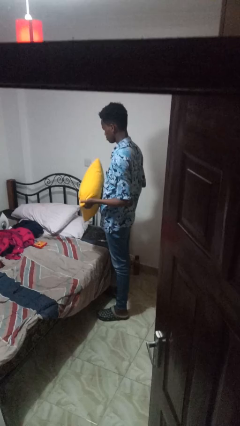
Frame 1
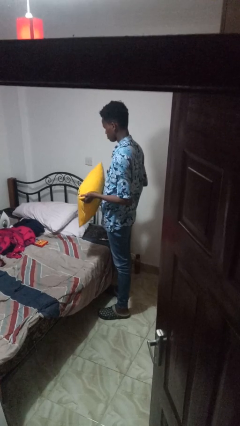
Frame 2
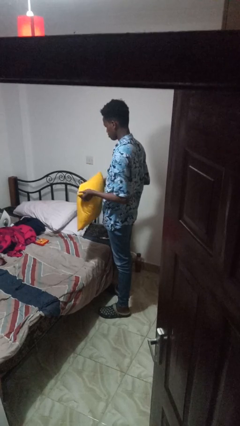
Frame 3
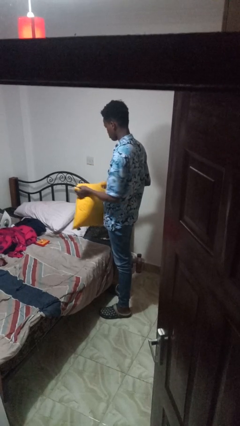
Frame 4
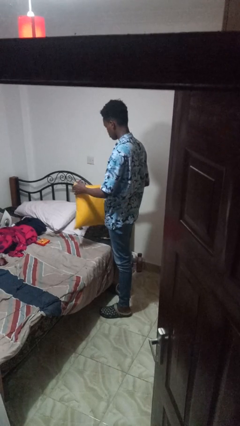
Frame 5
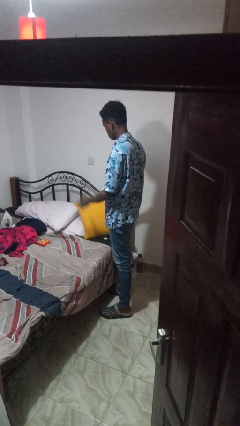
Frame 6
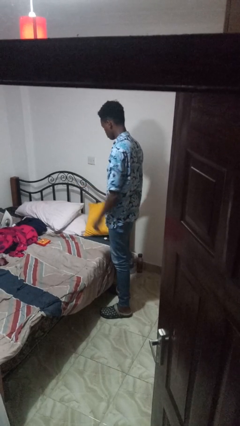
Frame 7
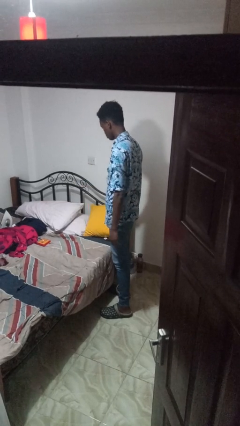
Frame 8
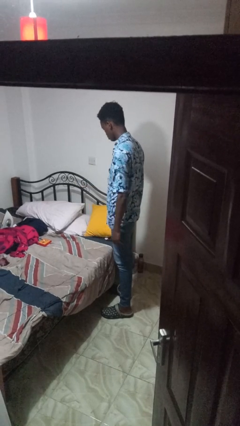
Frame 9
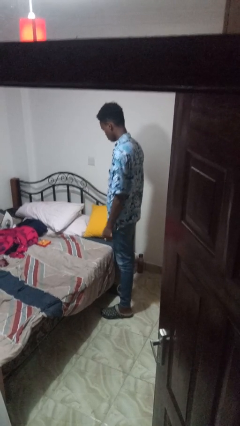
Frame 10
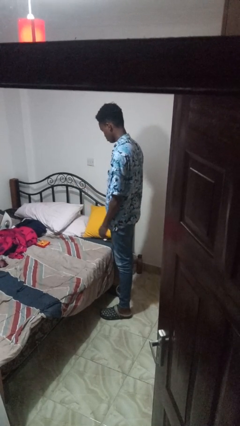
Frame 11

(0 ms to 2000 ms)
person puts down object on bed

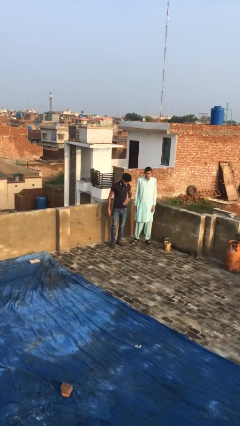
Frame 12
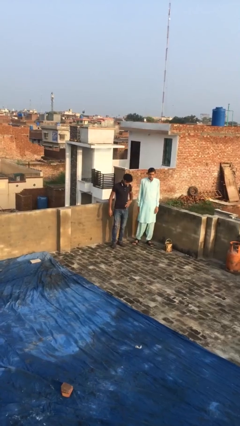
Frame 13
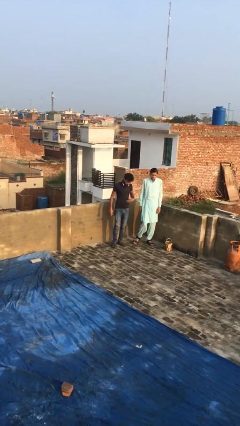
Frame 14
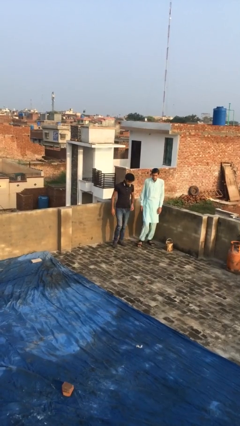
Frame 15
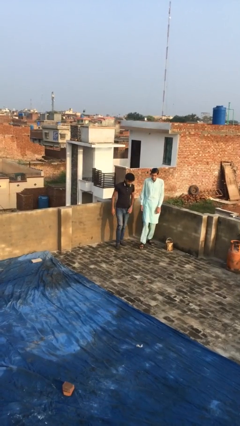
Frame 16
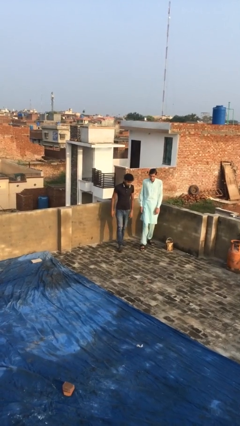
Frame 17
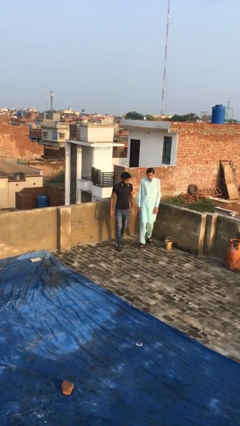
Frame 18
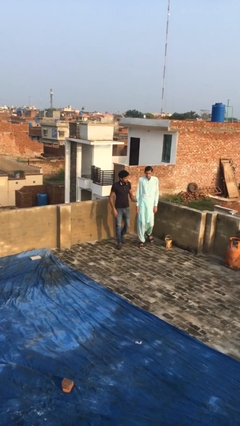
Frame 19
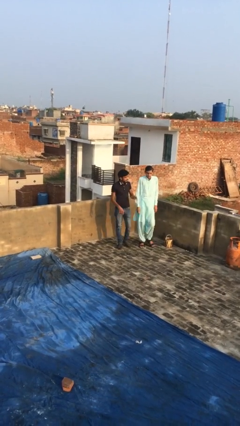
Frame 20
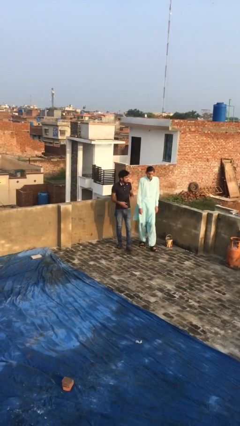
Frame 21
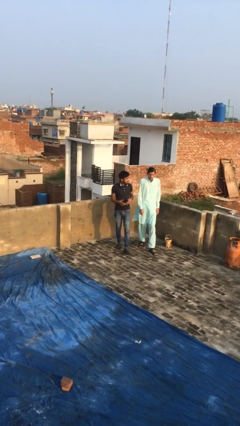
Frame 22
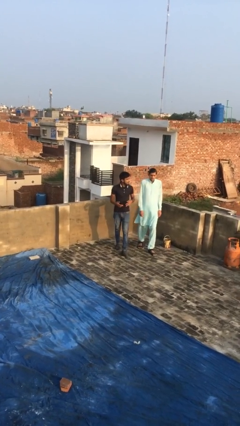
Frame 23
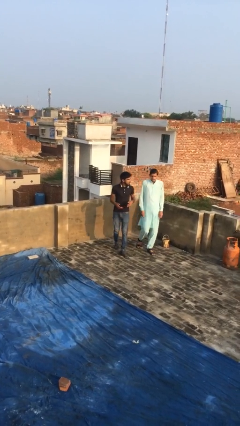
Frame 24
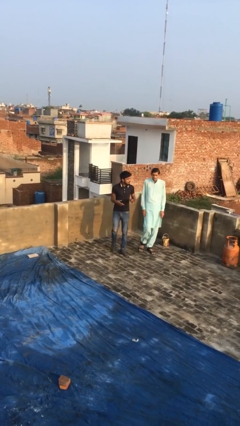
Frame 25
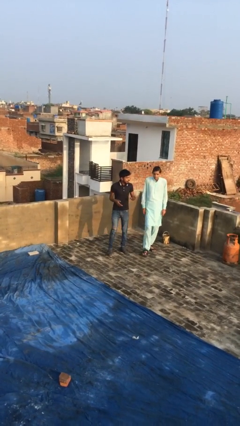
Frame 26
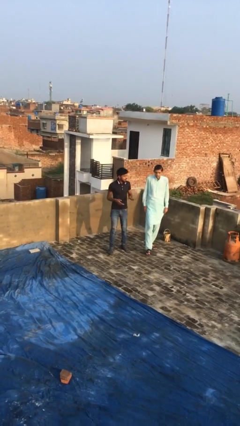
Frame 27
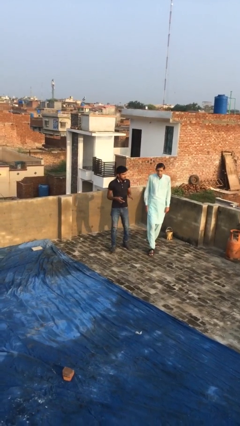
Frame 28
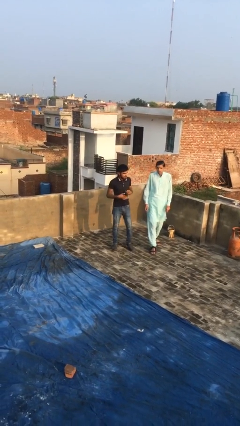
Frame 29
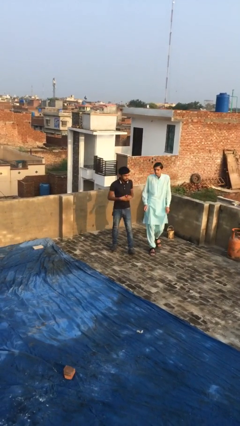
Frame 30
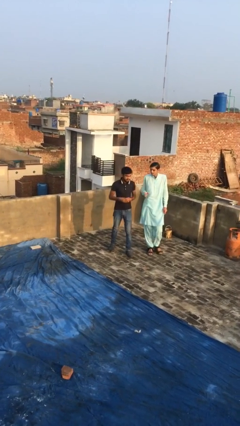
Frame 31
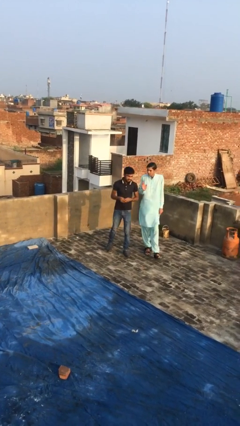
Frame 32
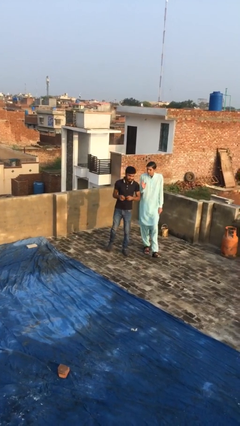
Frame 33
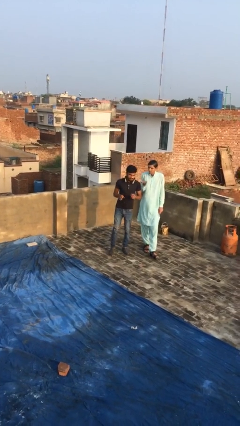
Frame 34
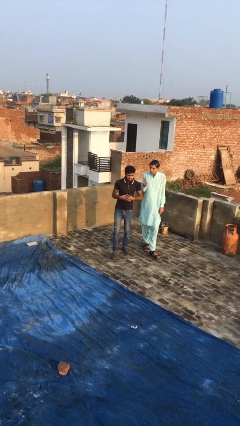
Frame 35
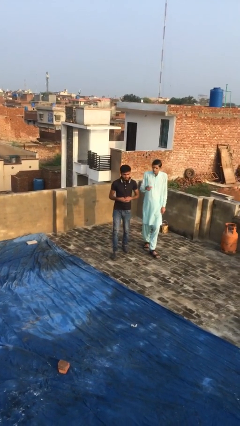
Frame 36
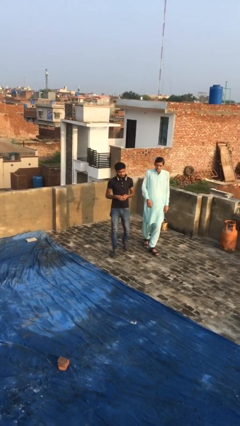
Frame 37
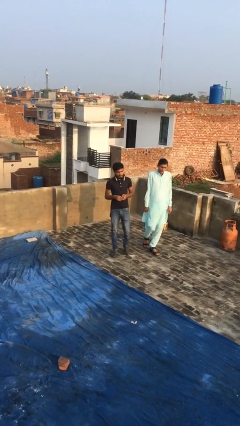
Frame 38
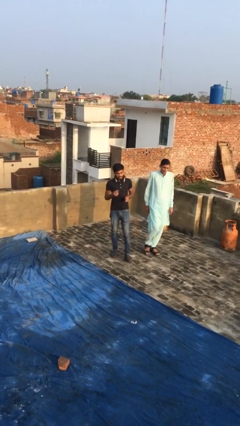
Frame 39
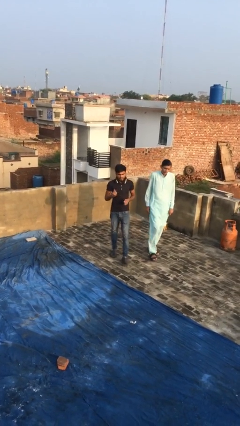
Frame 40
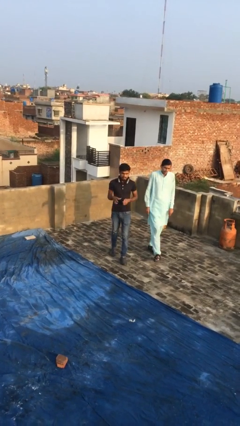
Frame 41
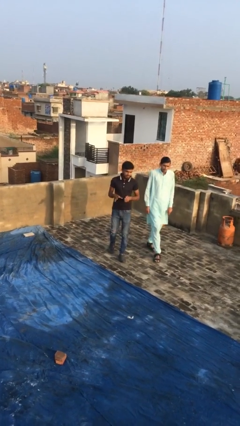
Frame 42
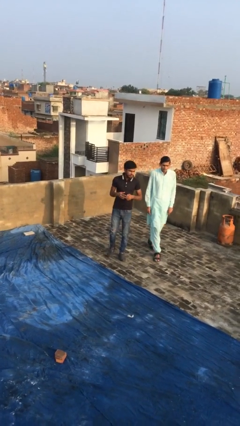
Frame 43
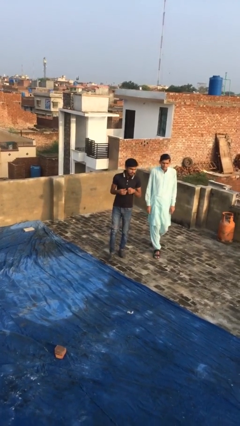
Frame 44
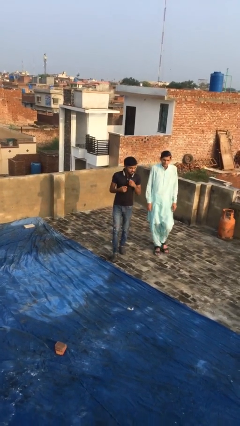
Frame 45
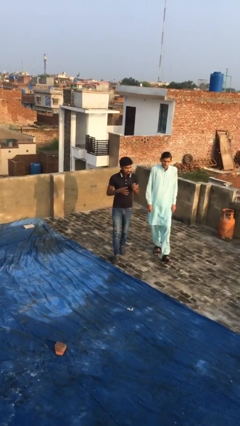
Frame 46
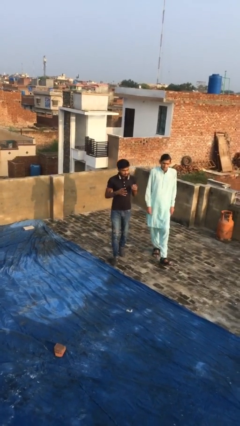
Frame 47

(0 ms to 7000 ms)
person talks to person

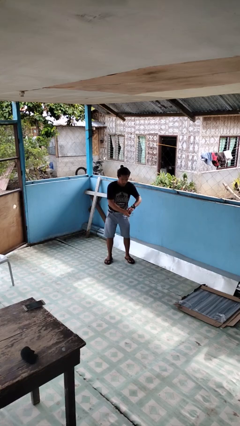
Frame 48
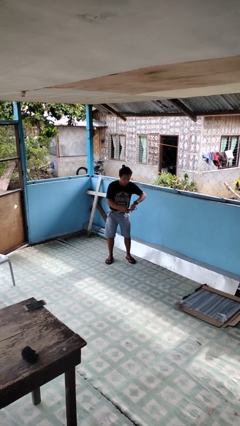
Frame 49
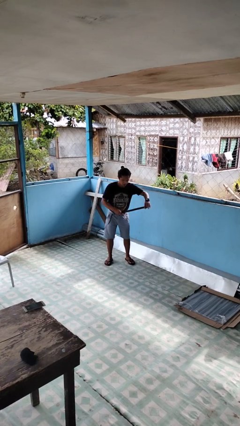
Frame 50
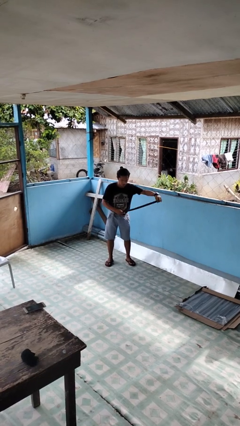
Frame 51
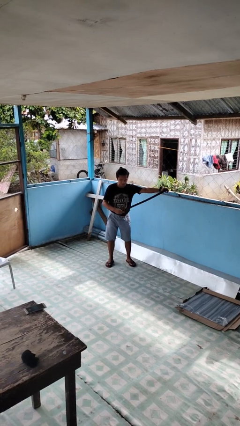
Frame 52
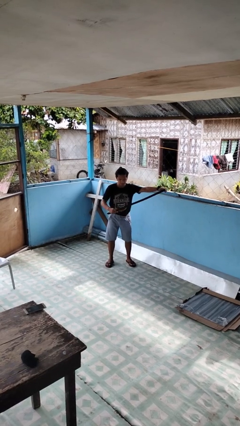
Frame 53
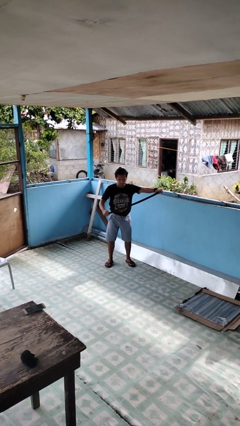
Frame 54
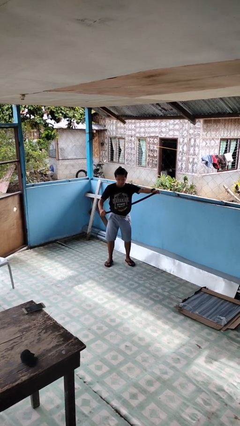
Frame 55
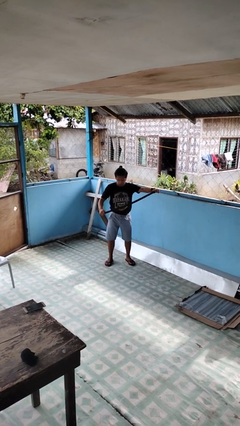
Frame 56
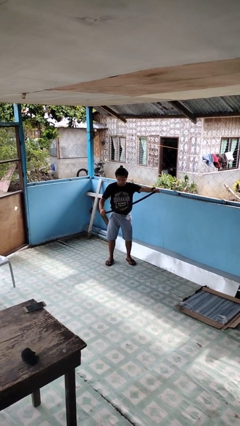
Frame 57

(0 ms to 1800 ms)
person takes off belt

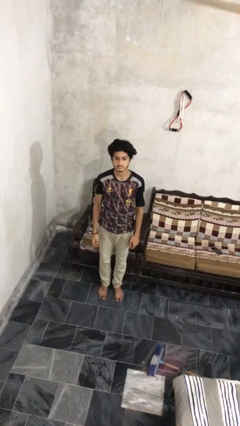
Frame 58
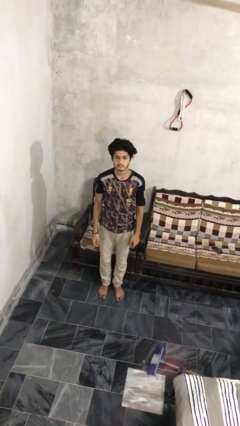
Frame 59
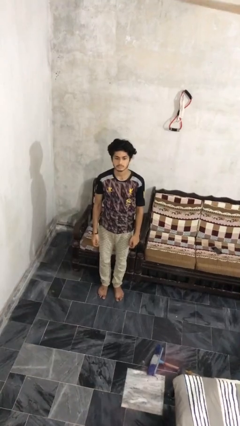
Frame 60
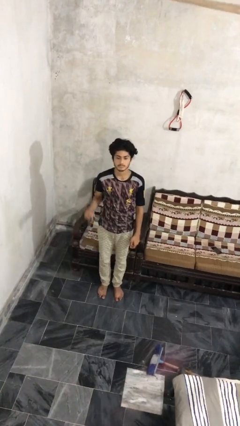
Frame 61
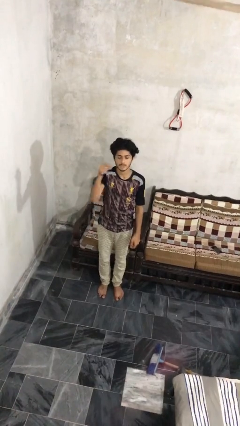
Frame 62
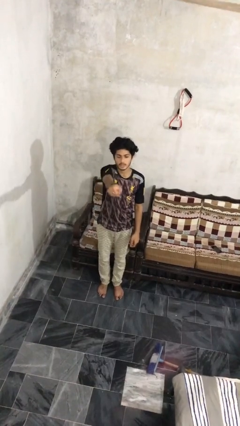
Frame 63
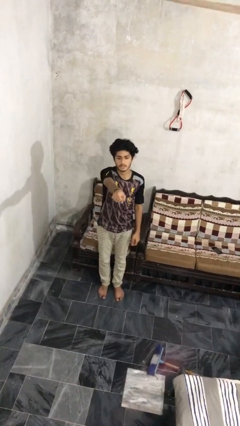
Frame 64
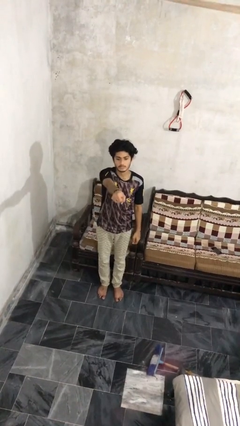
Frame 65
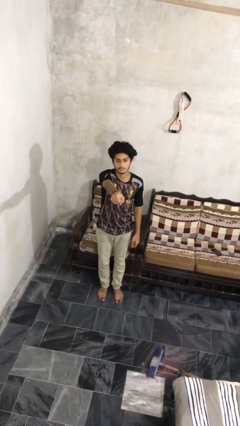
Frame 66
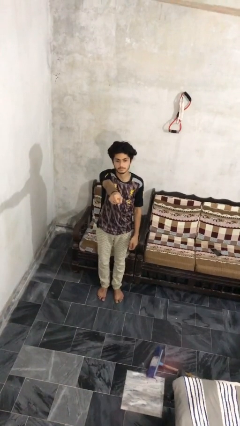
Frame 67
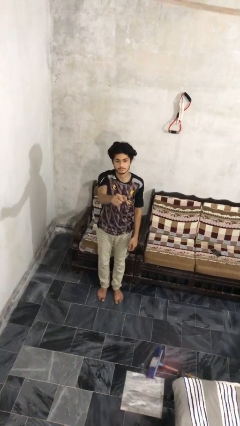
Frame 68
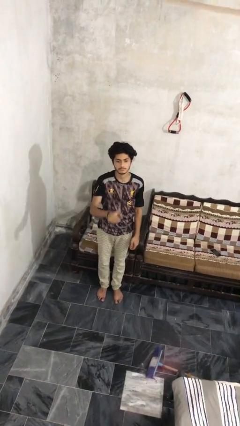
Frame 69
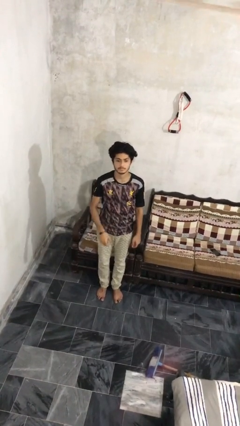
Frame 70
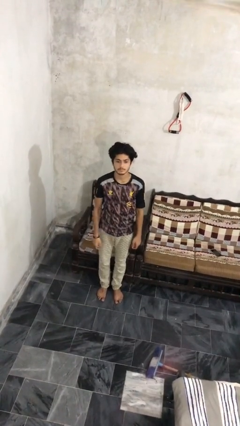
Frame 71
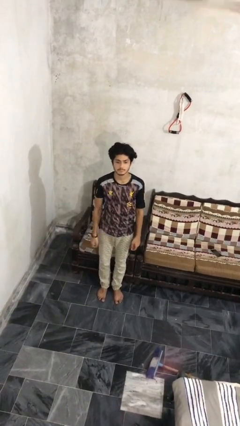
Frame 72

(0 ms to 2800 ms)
person punches

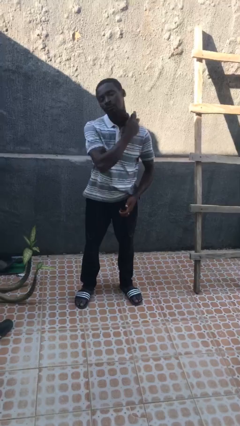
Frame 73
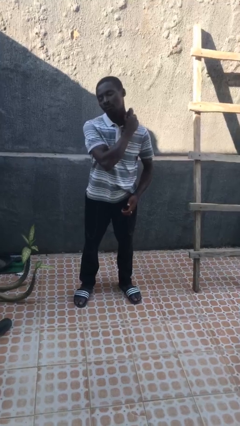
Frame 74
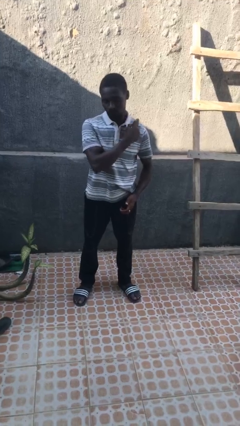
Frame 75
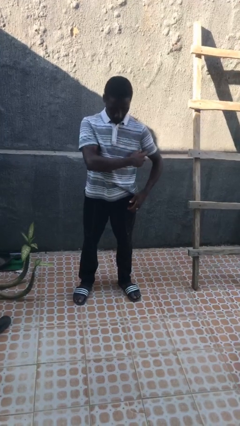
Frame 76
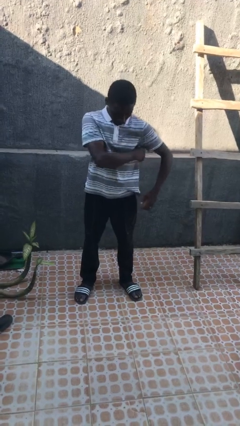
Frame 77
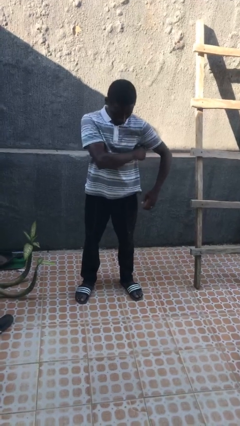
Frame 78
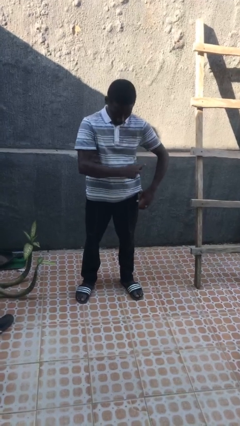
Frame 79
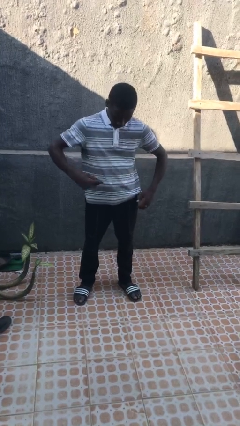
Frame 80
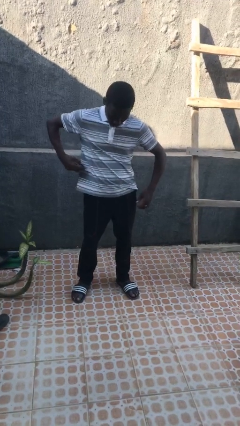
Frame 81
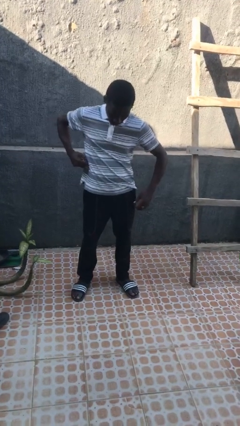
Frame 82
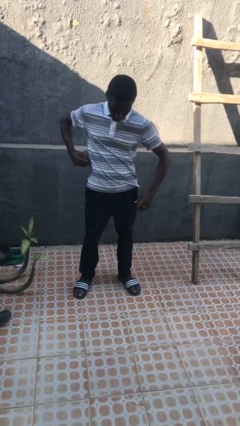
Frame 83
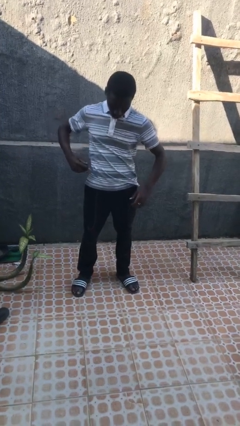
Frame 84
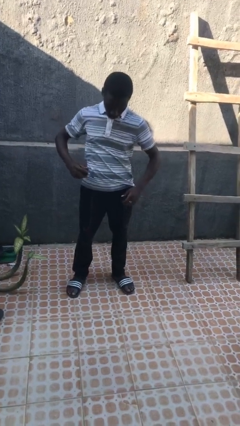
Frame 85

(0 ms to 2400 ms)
person applies deodorant

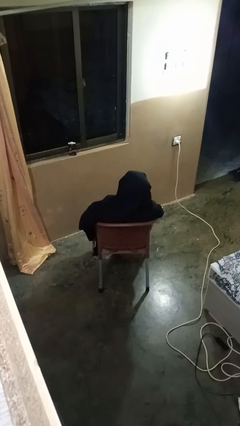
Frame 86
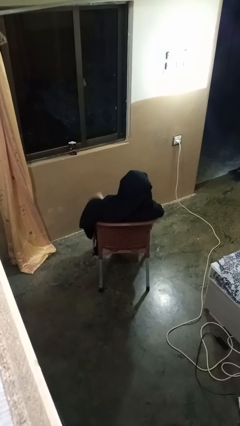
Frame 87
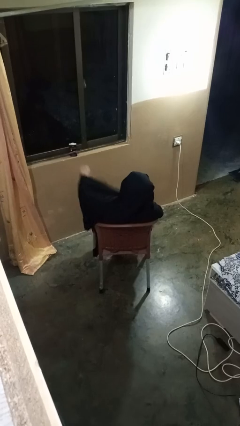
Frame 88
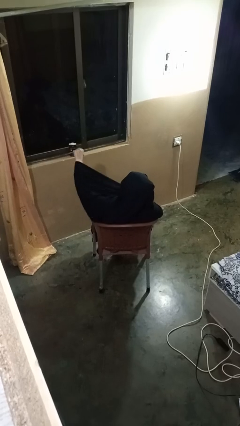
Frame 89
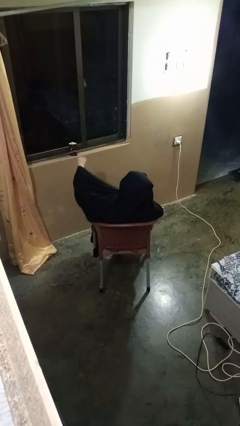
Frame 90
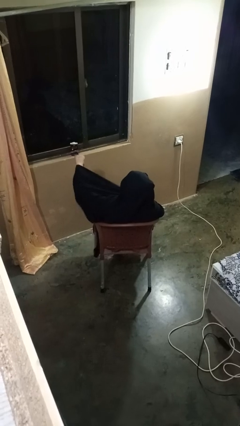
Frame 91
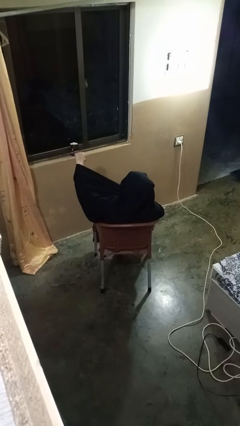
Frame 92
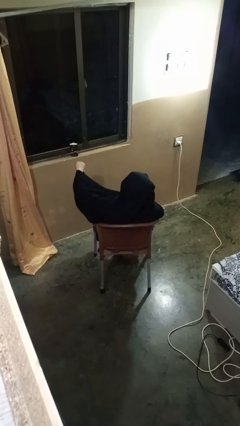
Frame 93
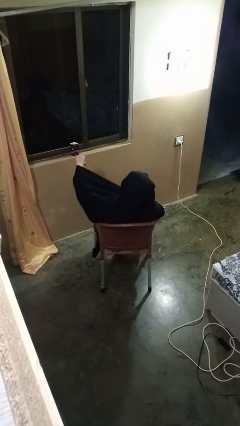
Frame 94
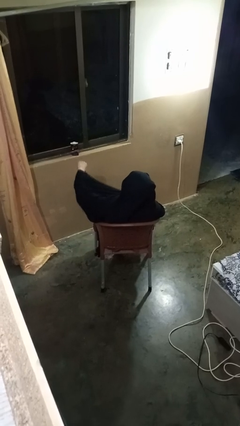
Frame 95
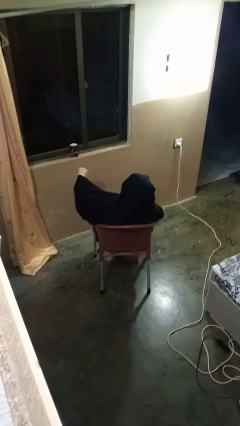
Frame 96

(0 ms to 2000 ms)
person gestures thumbs down
